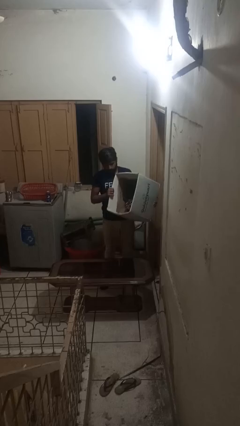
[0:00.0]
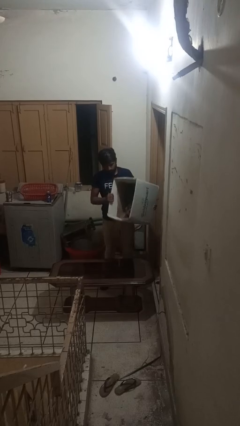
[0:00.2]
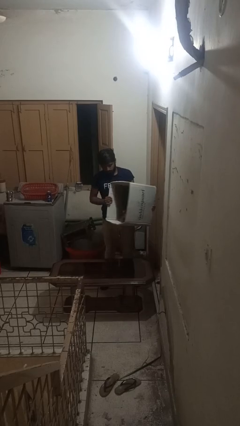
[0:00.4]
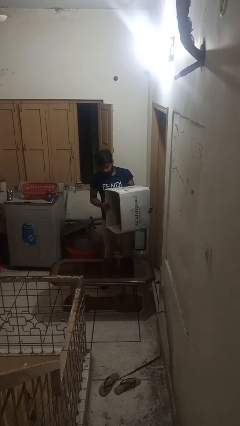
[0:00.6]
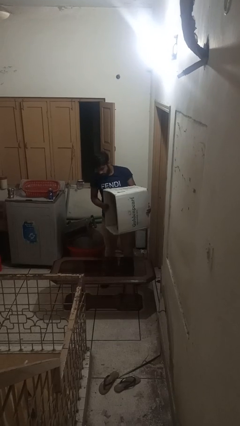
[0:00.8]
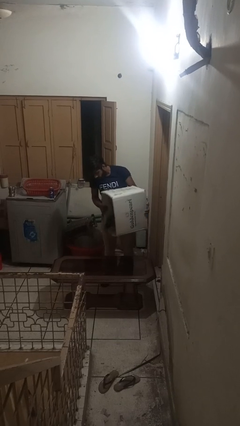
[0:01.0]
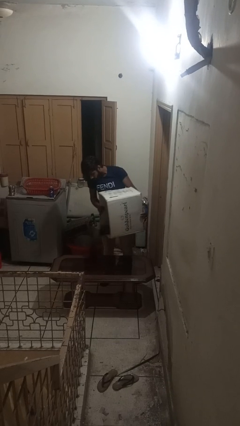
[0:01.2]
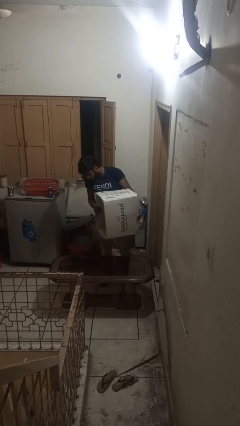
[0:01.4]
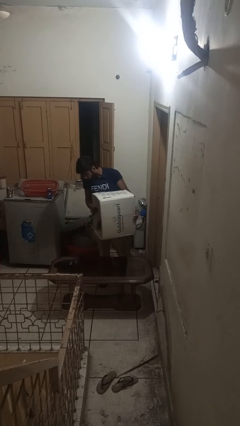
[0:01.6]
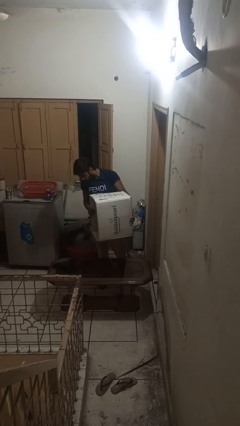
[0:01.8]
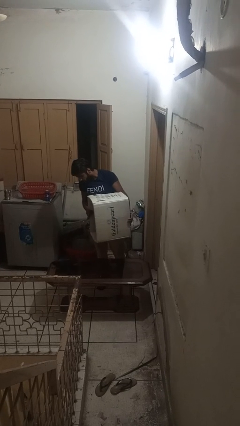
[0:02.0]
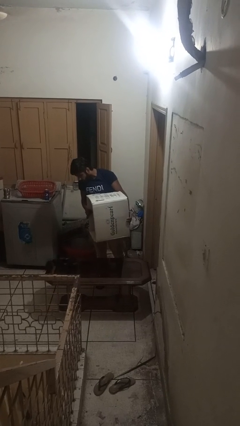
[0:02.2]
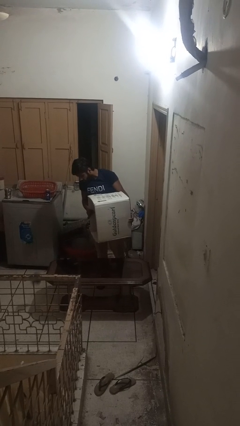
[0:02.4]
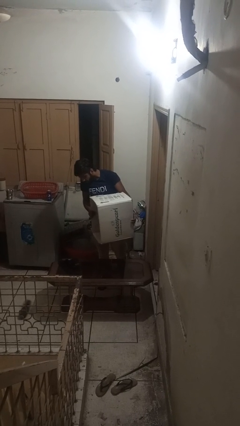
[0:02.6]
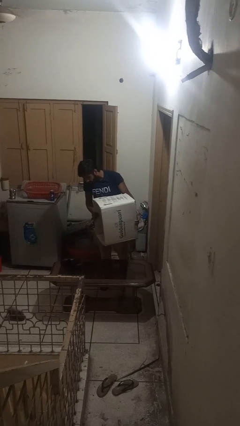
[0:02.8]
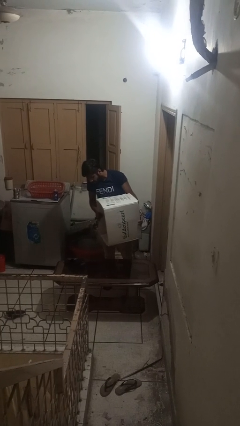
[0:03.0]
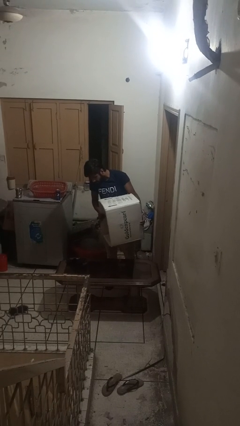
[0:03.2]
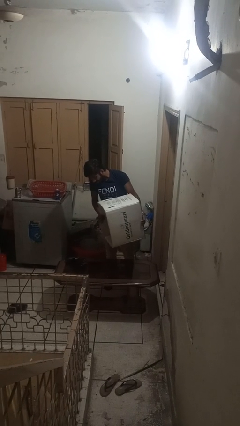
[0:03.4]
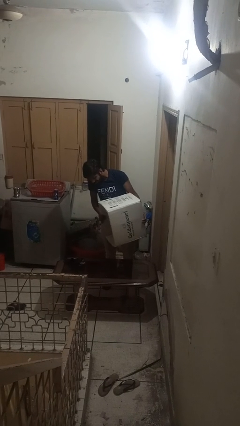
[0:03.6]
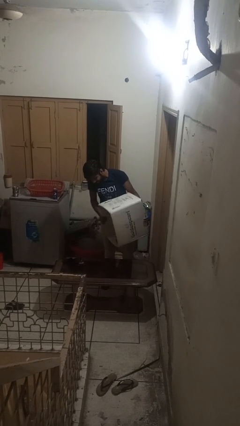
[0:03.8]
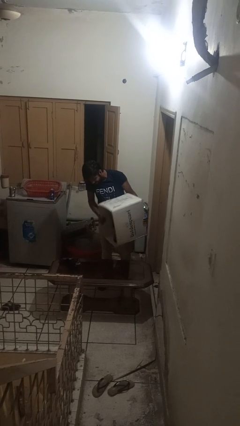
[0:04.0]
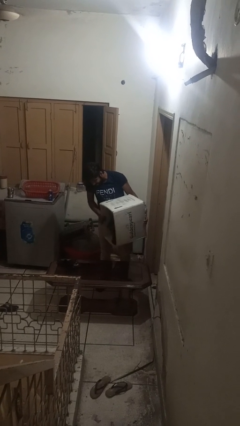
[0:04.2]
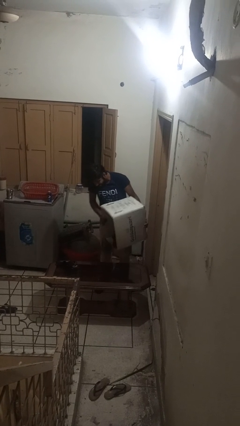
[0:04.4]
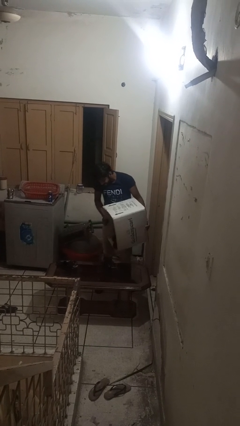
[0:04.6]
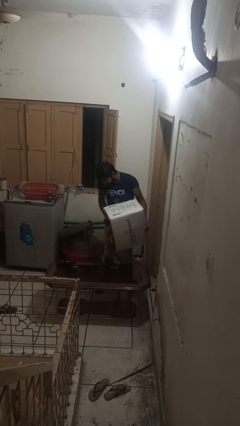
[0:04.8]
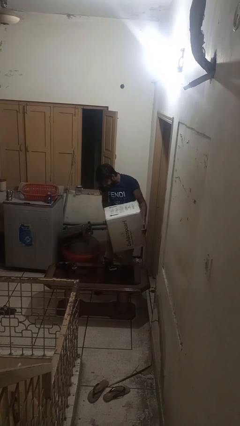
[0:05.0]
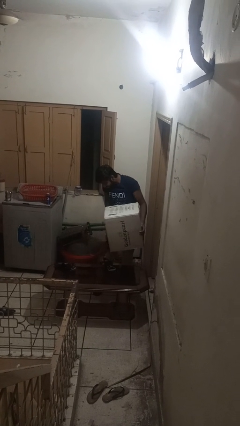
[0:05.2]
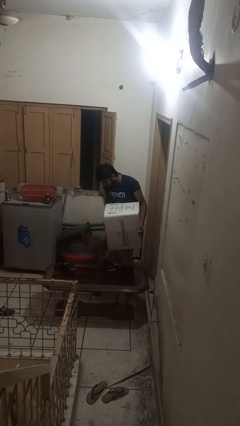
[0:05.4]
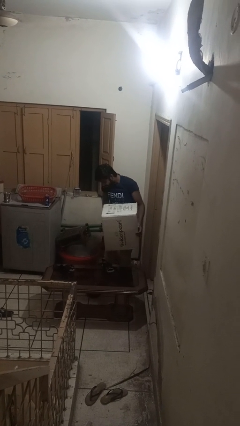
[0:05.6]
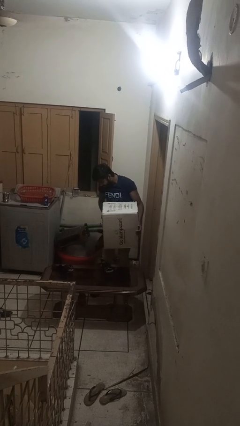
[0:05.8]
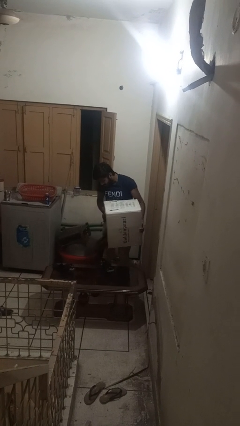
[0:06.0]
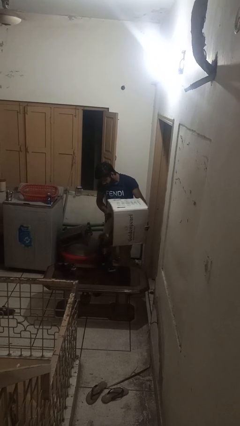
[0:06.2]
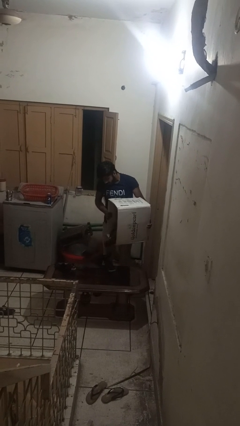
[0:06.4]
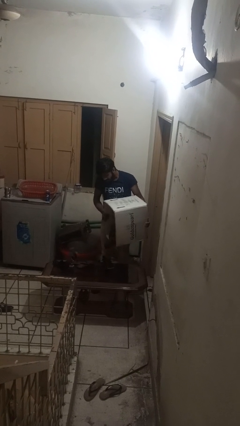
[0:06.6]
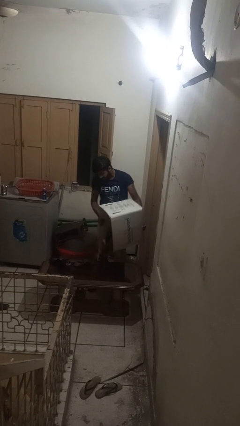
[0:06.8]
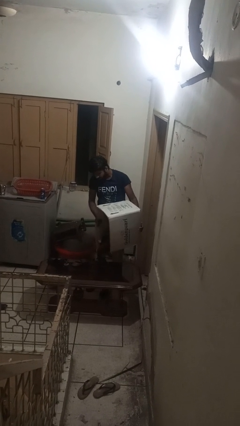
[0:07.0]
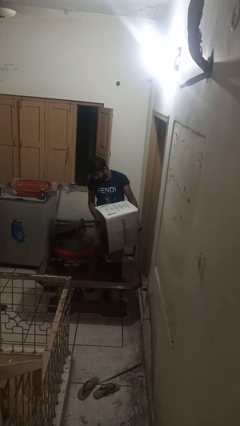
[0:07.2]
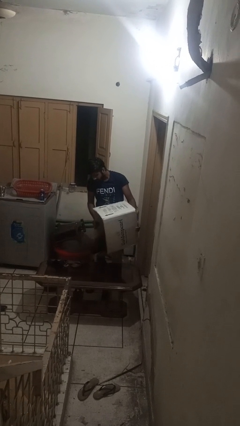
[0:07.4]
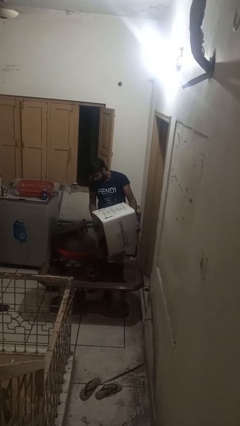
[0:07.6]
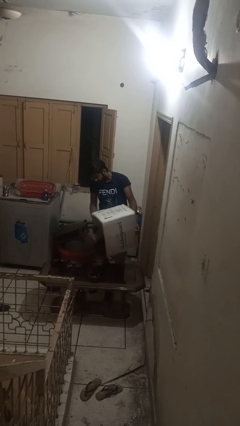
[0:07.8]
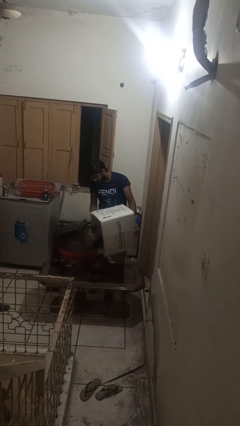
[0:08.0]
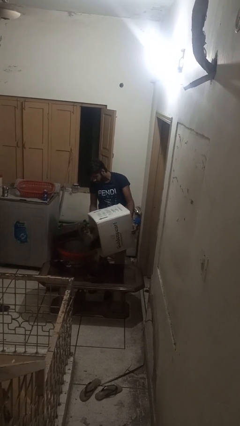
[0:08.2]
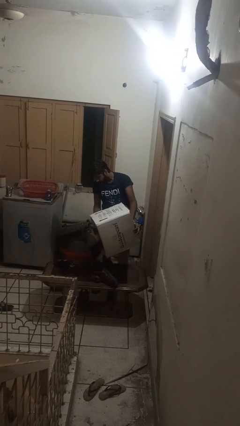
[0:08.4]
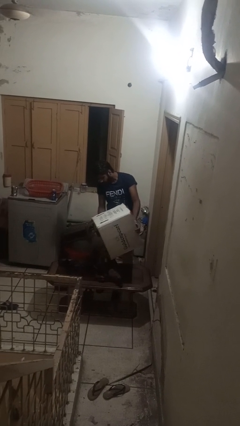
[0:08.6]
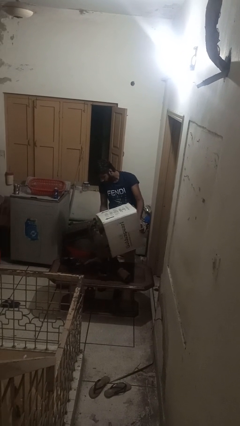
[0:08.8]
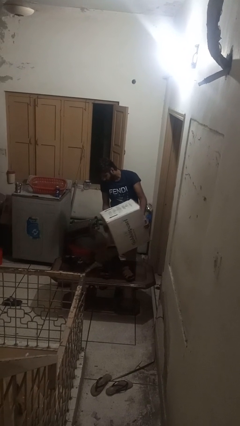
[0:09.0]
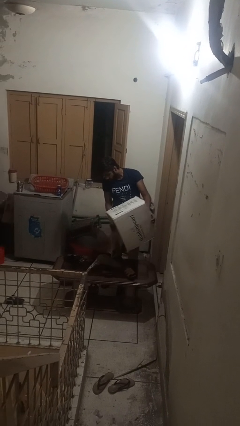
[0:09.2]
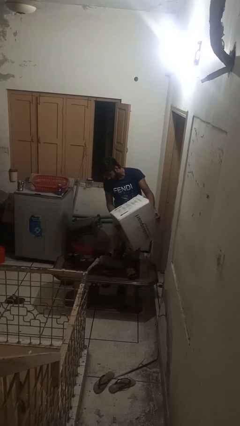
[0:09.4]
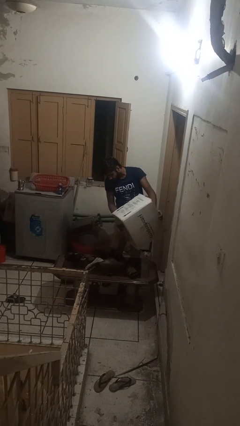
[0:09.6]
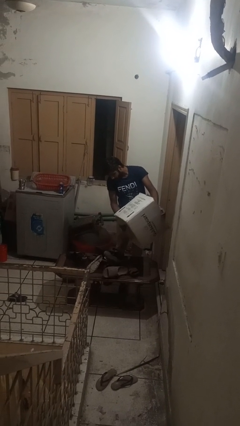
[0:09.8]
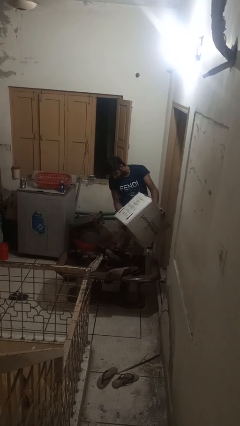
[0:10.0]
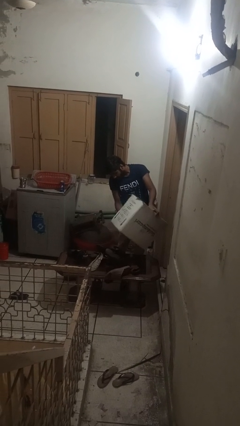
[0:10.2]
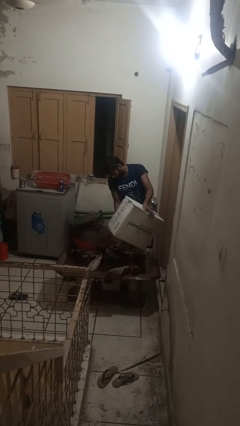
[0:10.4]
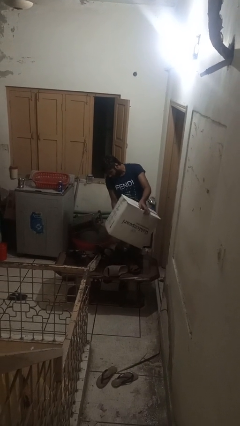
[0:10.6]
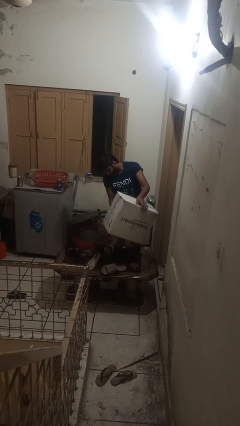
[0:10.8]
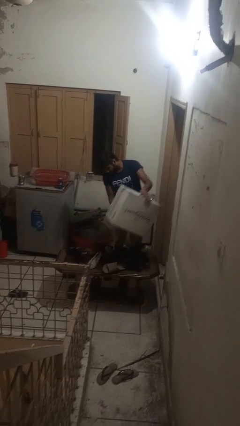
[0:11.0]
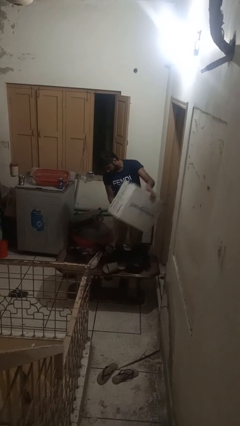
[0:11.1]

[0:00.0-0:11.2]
person unloads box onto table

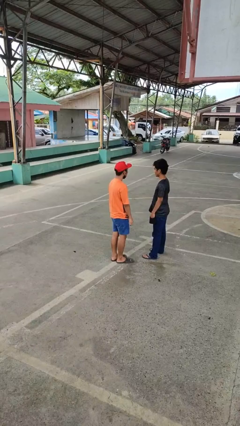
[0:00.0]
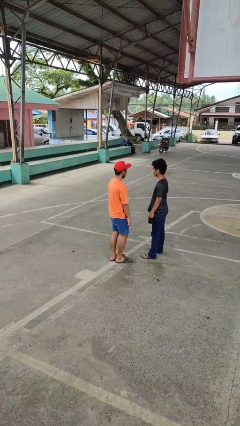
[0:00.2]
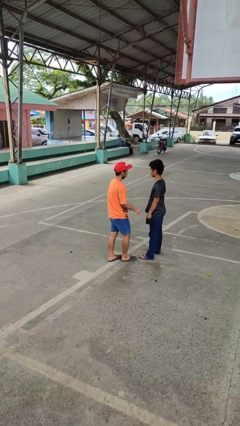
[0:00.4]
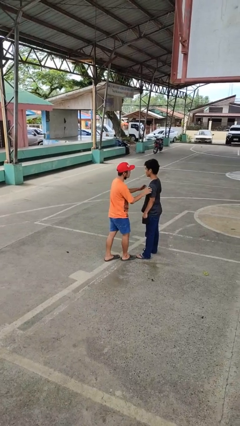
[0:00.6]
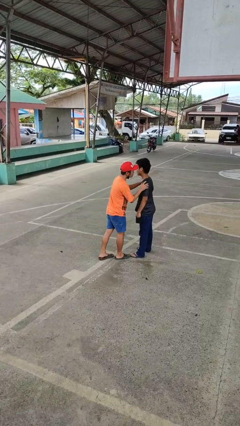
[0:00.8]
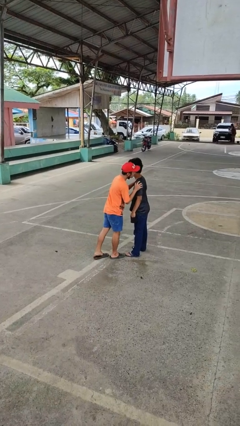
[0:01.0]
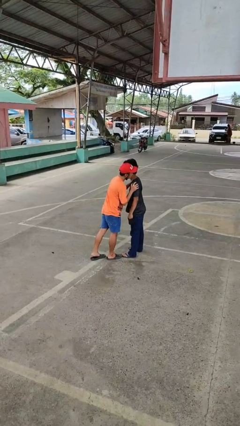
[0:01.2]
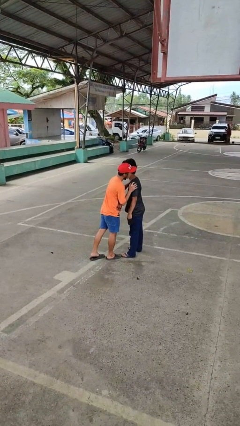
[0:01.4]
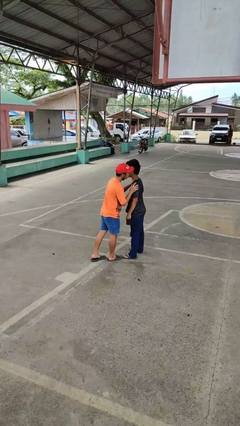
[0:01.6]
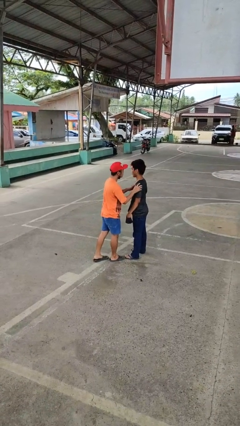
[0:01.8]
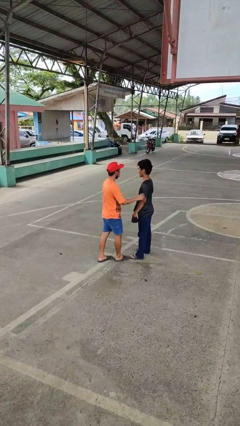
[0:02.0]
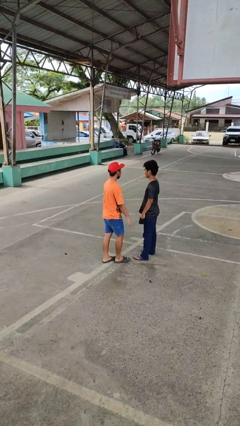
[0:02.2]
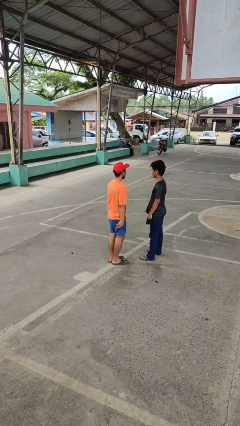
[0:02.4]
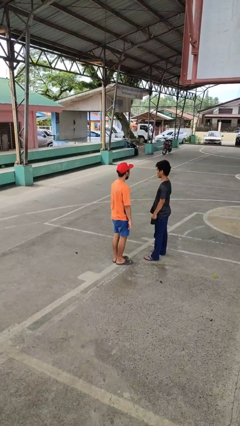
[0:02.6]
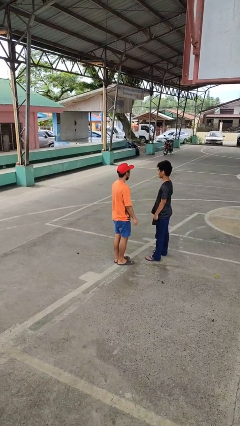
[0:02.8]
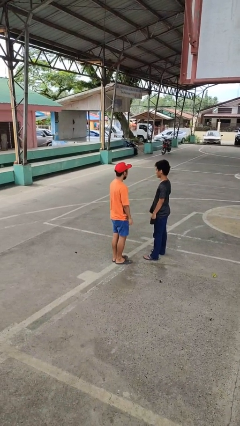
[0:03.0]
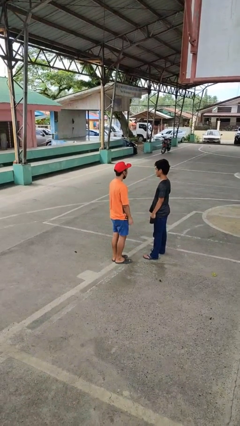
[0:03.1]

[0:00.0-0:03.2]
person kisses cheek of person

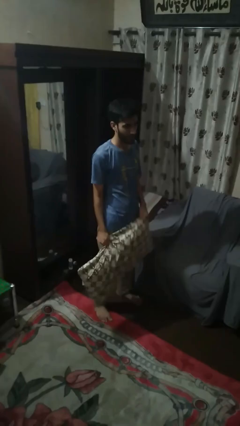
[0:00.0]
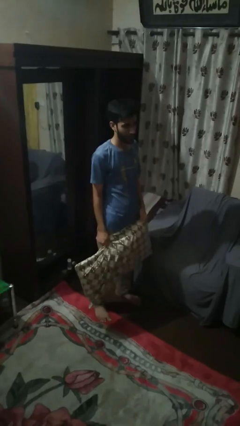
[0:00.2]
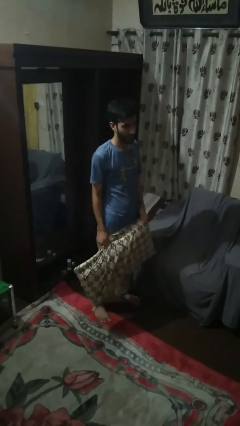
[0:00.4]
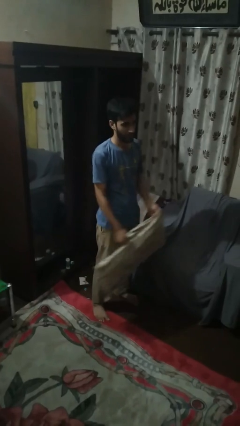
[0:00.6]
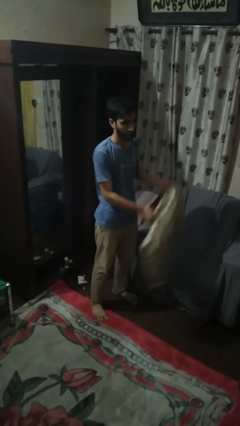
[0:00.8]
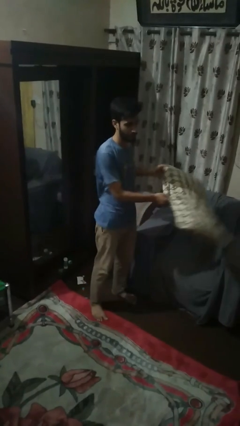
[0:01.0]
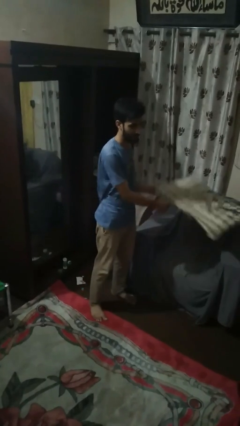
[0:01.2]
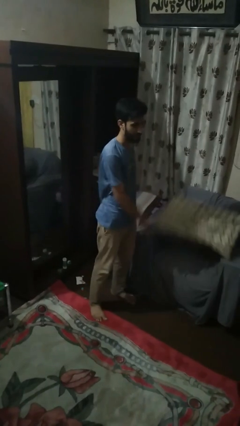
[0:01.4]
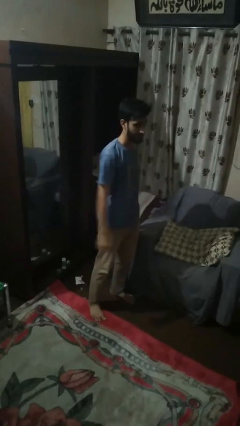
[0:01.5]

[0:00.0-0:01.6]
person puts down object on couch

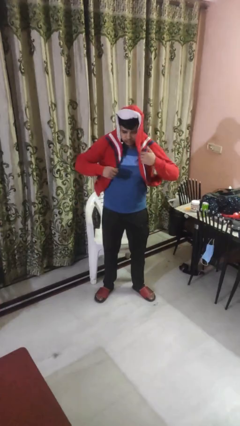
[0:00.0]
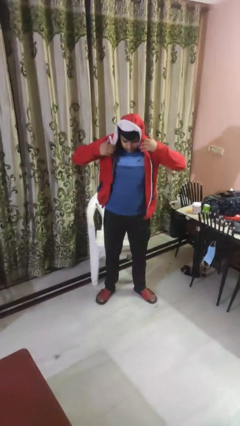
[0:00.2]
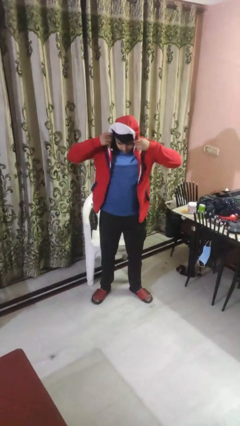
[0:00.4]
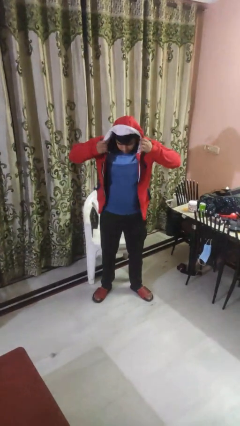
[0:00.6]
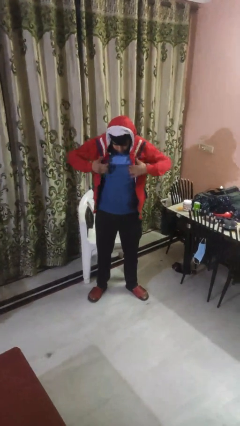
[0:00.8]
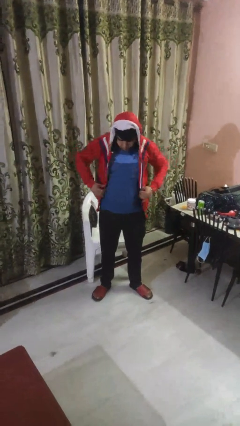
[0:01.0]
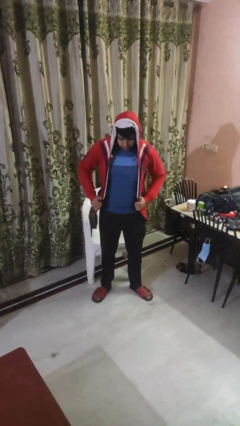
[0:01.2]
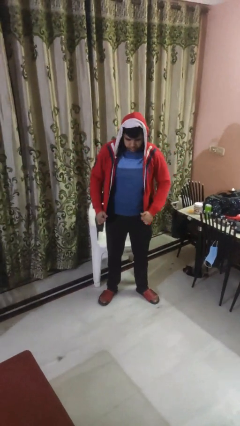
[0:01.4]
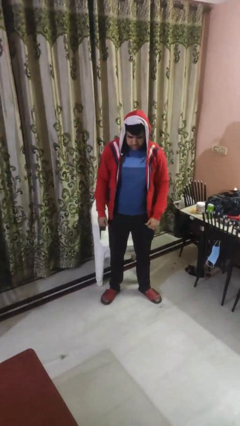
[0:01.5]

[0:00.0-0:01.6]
person puts on hoodie

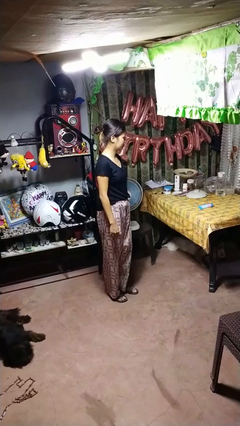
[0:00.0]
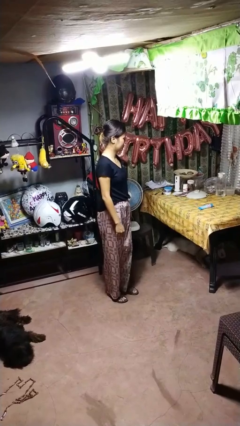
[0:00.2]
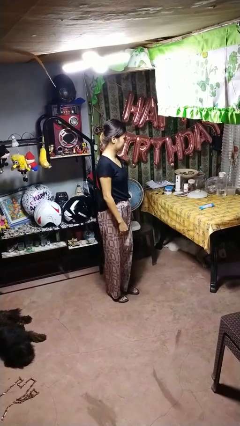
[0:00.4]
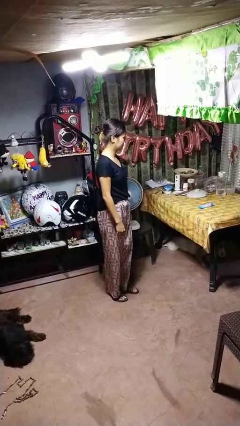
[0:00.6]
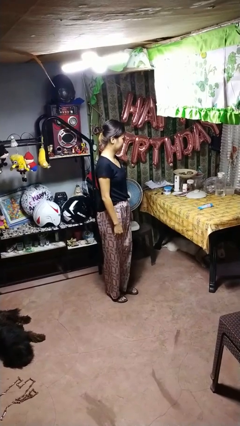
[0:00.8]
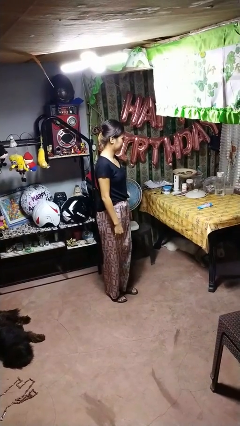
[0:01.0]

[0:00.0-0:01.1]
person throws object on table
